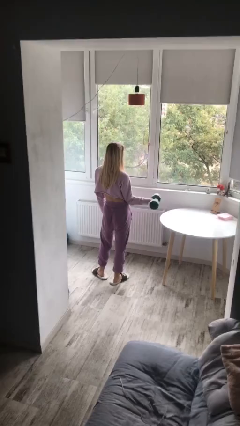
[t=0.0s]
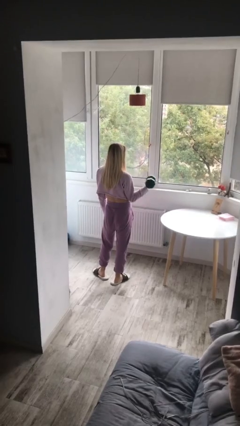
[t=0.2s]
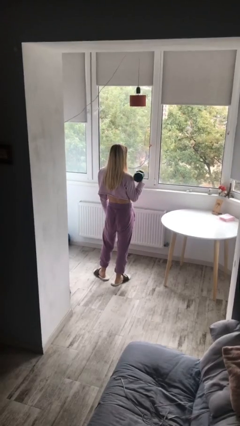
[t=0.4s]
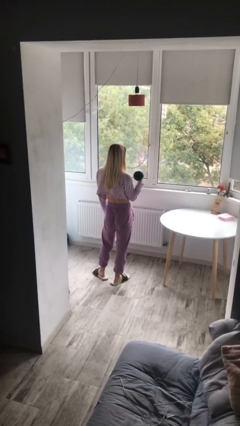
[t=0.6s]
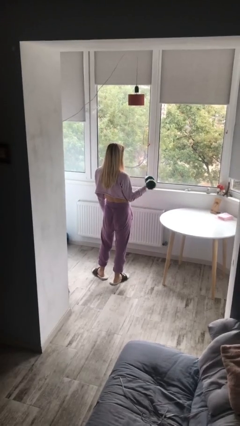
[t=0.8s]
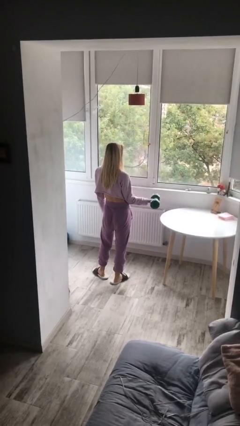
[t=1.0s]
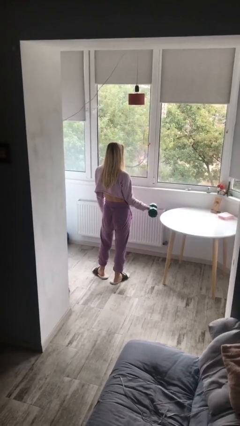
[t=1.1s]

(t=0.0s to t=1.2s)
person lifts dumbbells

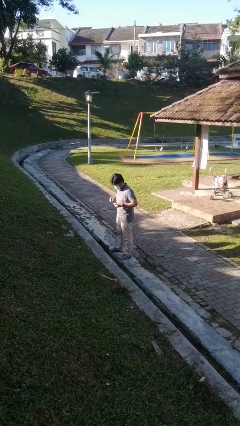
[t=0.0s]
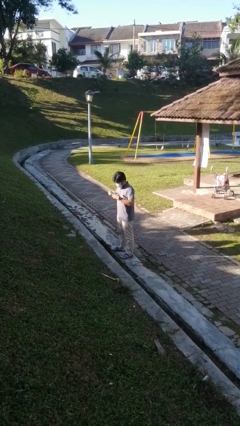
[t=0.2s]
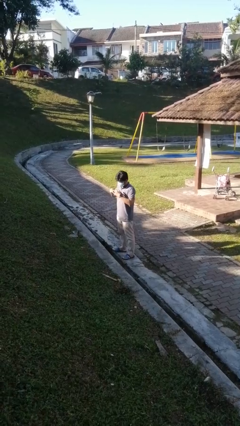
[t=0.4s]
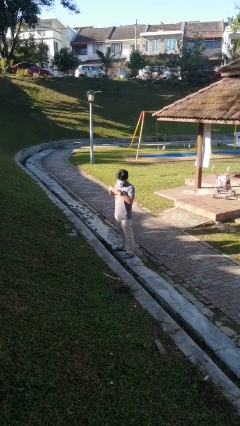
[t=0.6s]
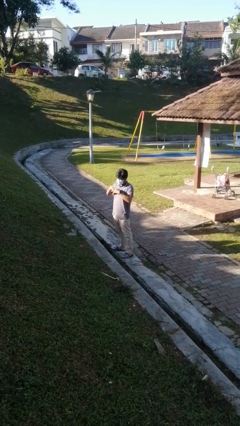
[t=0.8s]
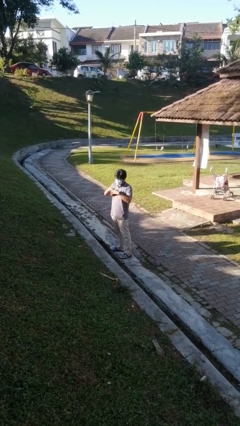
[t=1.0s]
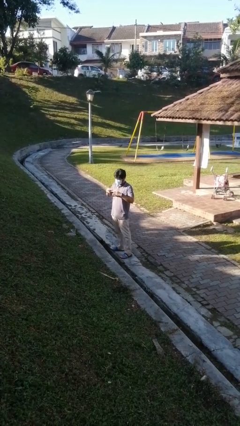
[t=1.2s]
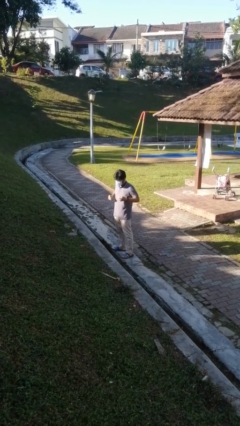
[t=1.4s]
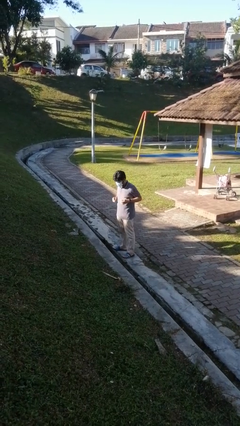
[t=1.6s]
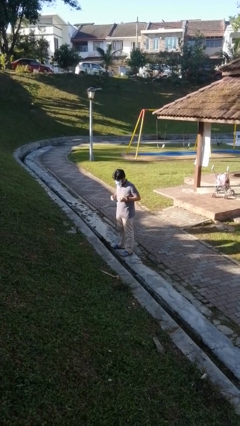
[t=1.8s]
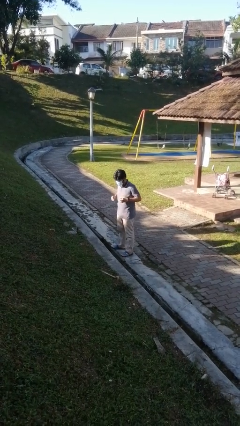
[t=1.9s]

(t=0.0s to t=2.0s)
person puts on ring

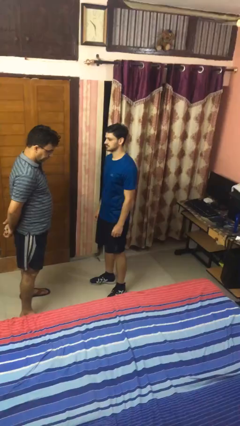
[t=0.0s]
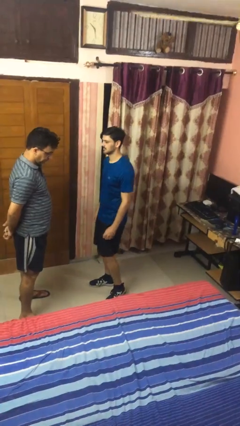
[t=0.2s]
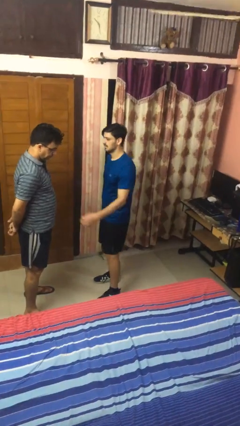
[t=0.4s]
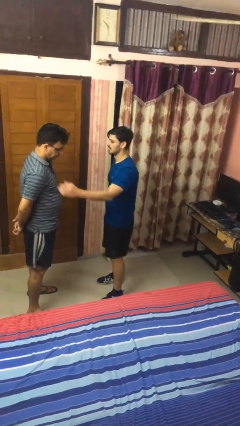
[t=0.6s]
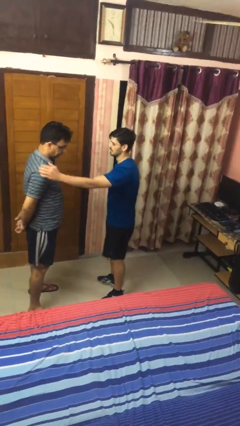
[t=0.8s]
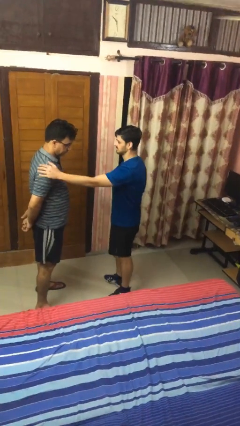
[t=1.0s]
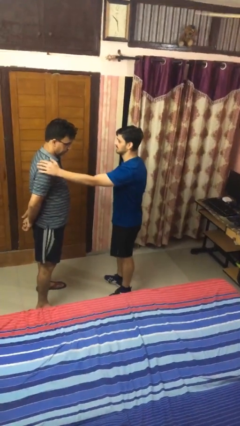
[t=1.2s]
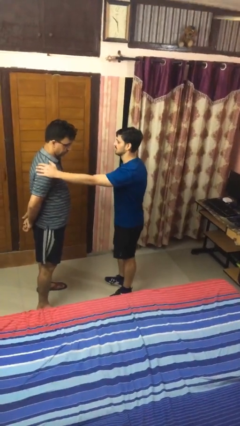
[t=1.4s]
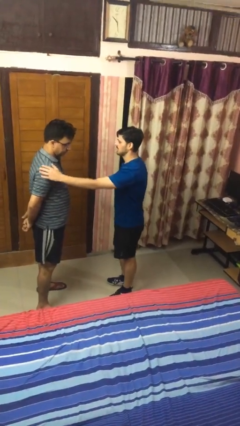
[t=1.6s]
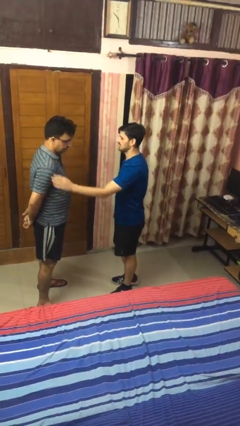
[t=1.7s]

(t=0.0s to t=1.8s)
person pounds shoulders of person

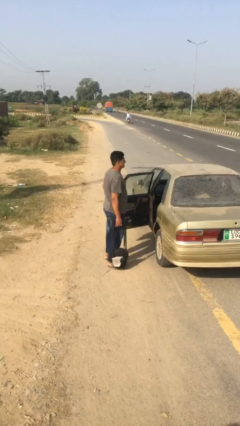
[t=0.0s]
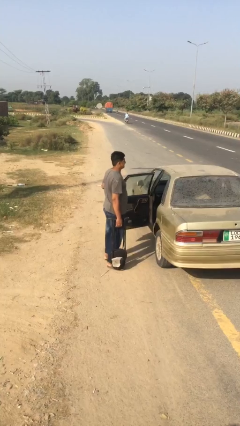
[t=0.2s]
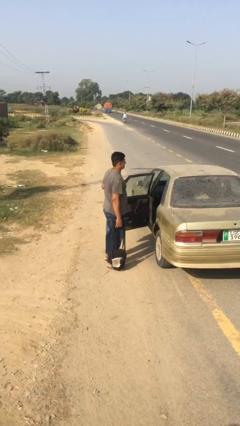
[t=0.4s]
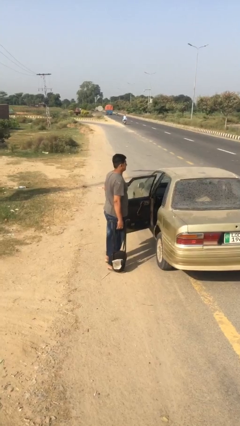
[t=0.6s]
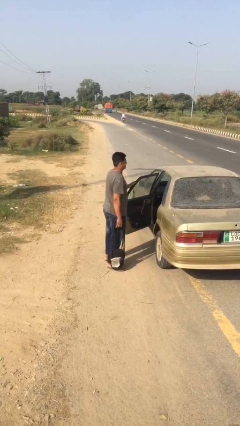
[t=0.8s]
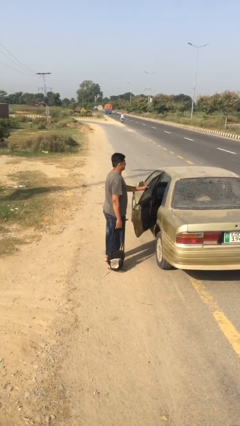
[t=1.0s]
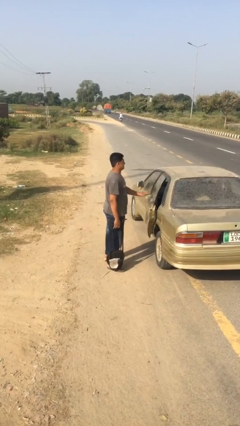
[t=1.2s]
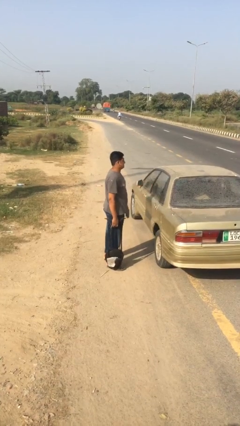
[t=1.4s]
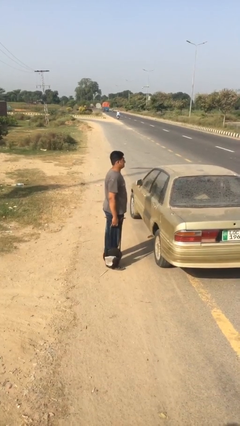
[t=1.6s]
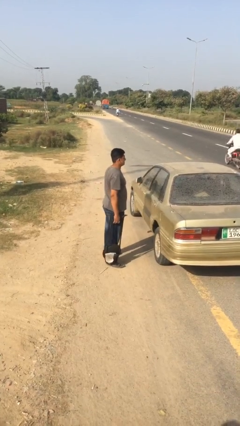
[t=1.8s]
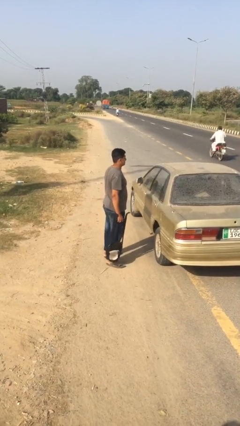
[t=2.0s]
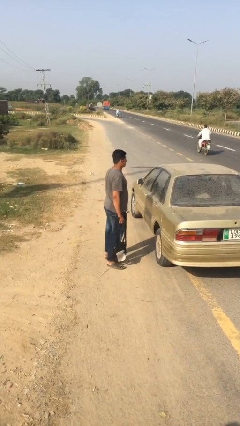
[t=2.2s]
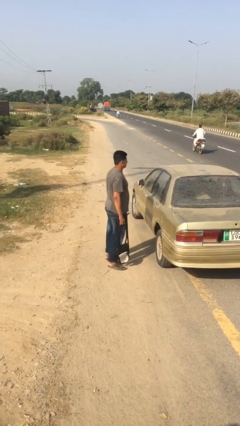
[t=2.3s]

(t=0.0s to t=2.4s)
person closes car door

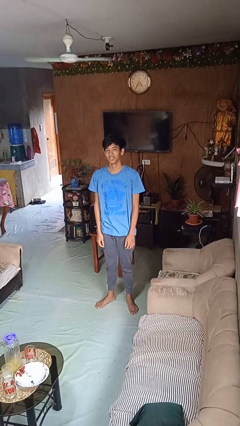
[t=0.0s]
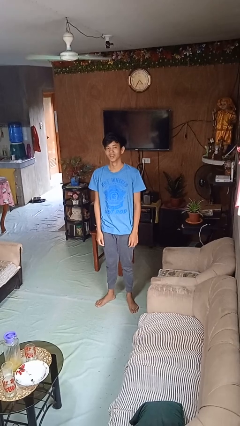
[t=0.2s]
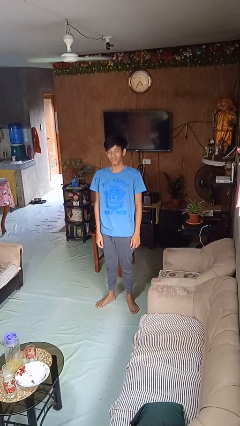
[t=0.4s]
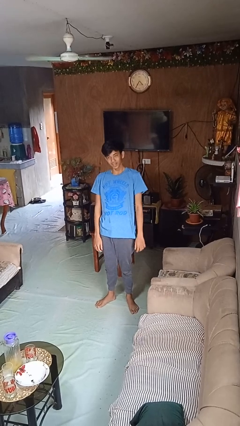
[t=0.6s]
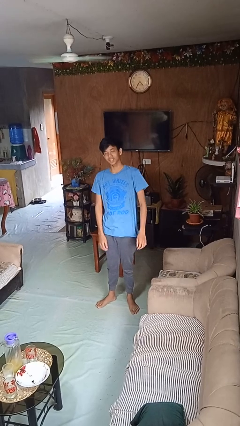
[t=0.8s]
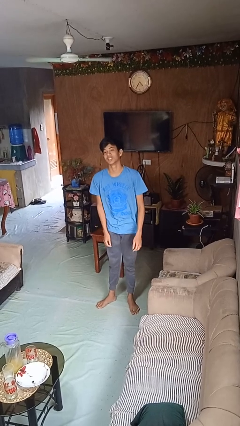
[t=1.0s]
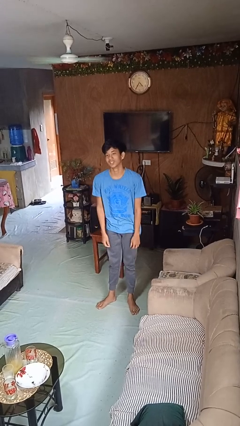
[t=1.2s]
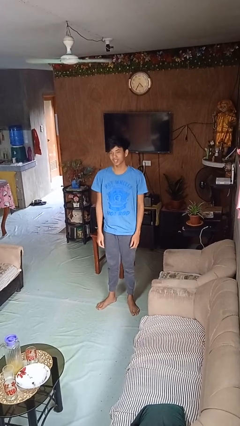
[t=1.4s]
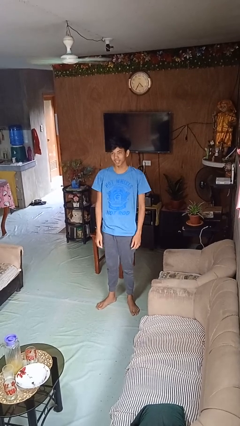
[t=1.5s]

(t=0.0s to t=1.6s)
person dances in place

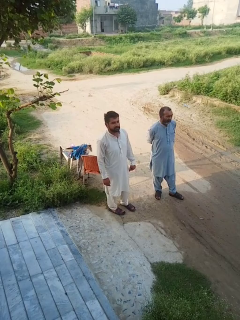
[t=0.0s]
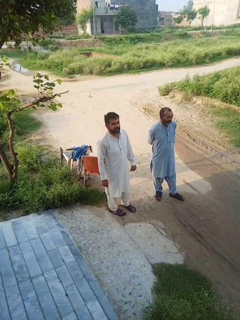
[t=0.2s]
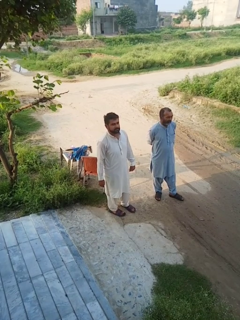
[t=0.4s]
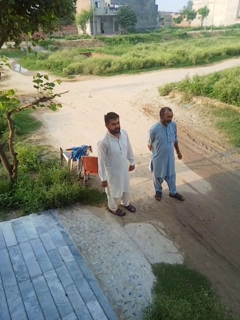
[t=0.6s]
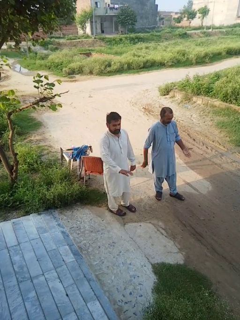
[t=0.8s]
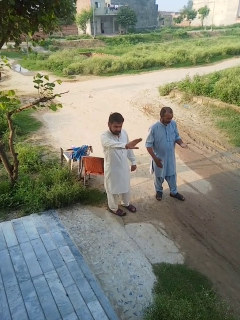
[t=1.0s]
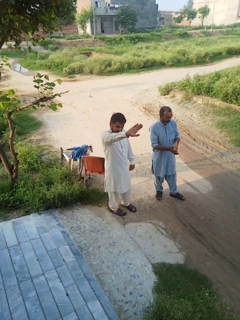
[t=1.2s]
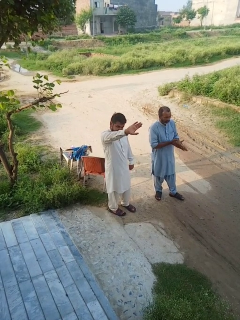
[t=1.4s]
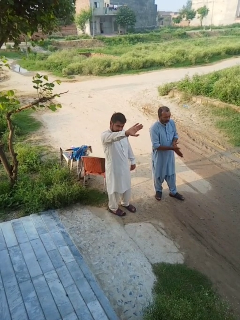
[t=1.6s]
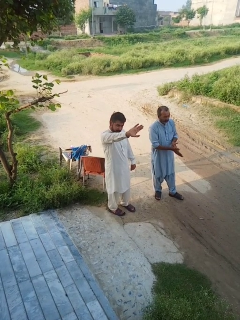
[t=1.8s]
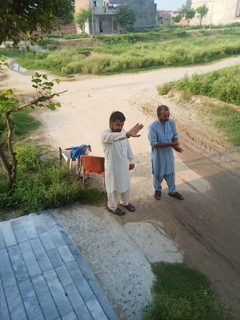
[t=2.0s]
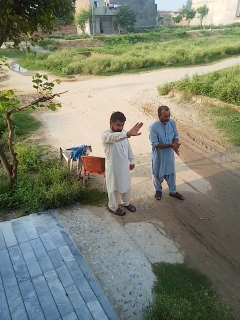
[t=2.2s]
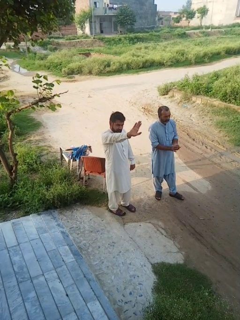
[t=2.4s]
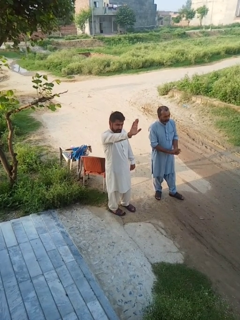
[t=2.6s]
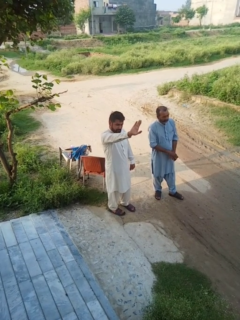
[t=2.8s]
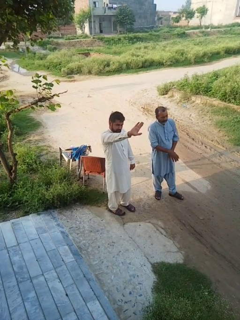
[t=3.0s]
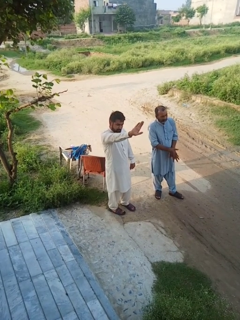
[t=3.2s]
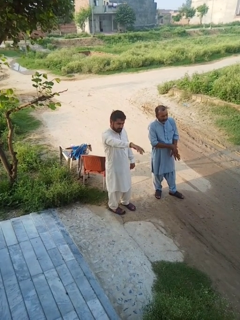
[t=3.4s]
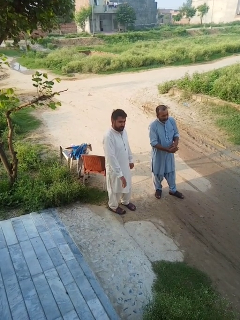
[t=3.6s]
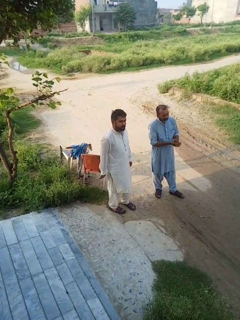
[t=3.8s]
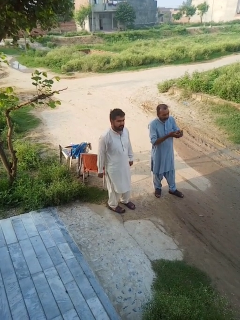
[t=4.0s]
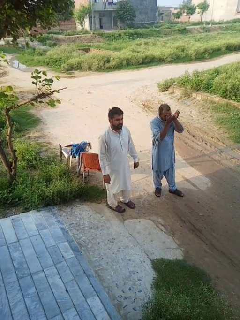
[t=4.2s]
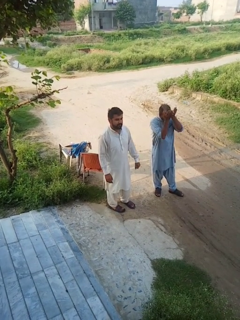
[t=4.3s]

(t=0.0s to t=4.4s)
person waves at person

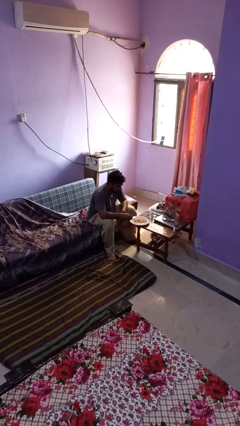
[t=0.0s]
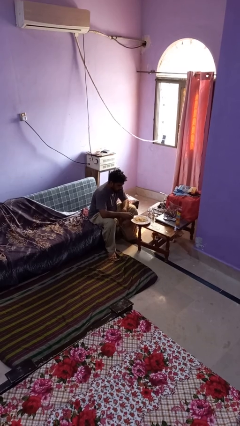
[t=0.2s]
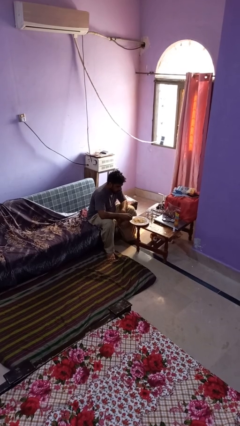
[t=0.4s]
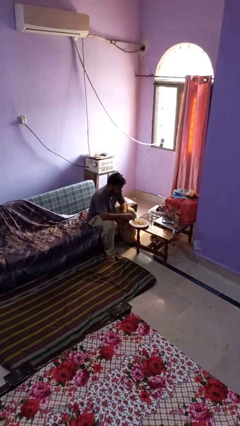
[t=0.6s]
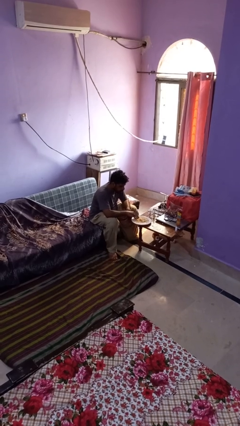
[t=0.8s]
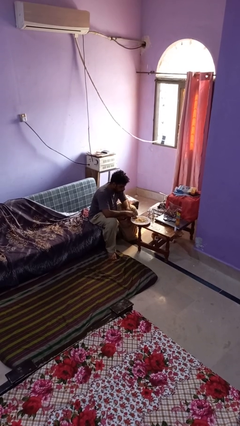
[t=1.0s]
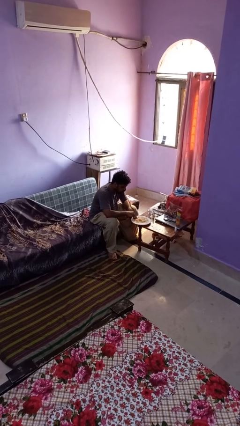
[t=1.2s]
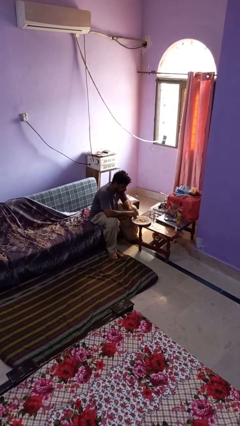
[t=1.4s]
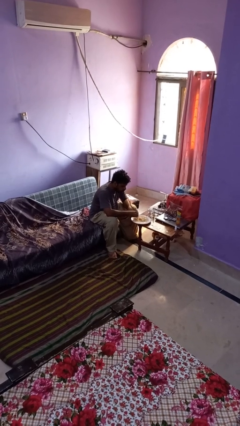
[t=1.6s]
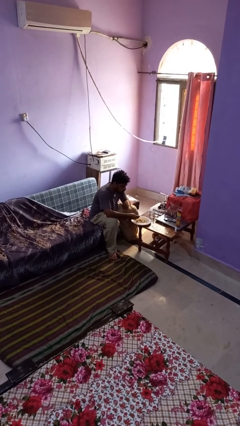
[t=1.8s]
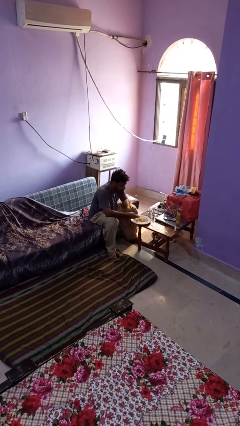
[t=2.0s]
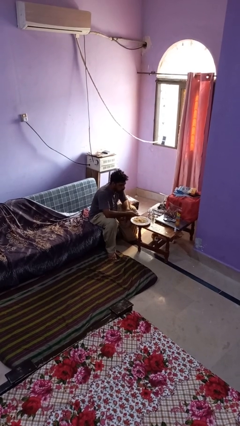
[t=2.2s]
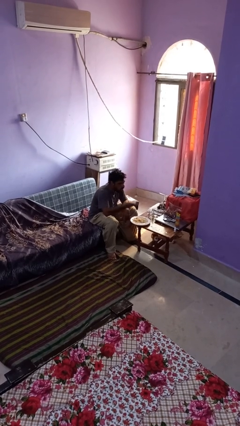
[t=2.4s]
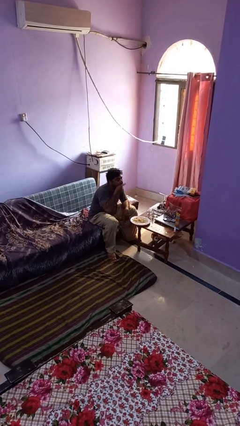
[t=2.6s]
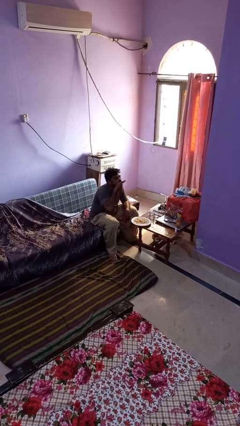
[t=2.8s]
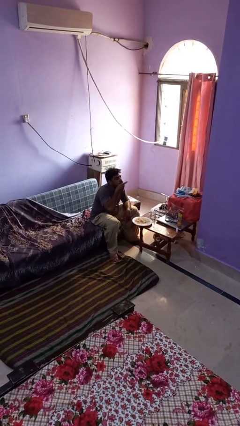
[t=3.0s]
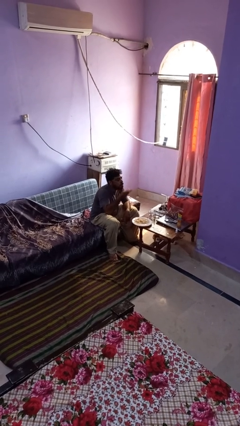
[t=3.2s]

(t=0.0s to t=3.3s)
person eats with hands

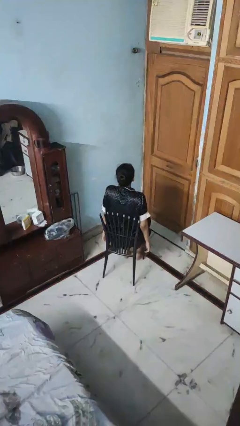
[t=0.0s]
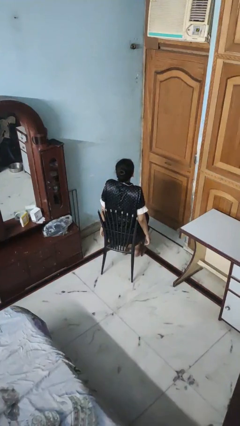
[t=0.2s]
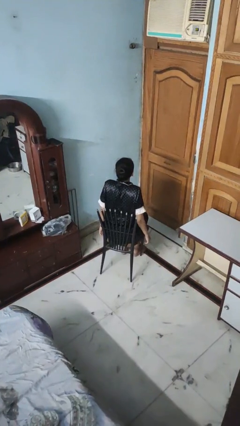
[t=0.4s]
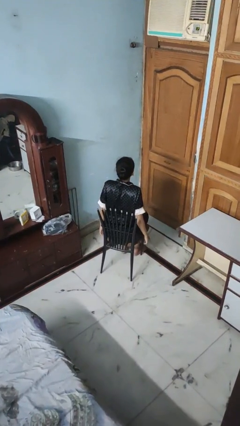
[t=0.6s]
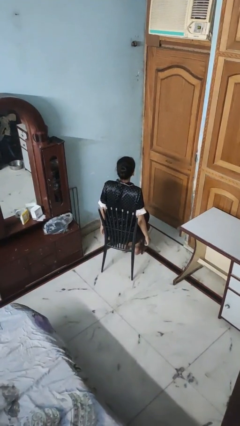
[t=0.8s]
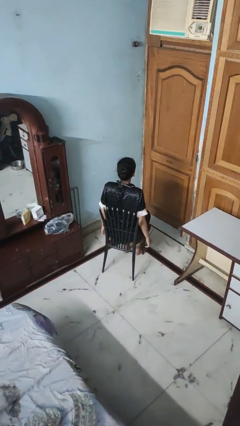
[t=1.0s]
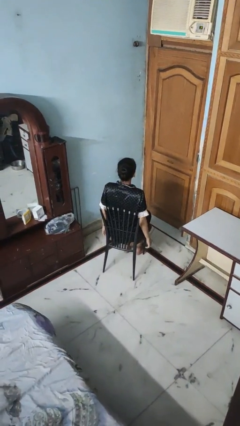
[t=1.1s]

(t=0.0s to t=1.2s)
person shrugs

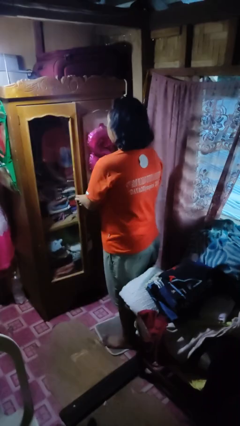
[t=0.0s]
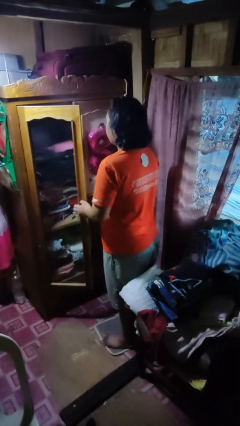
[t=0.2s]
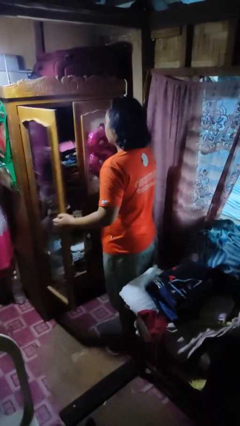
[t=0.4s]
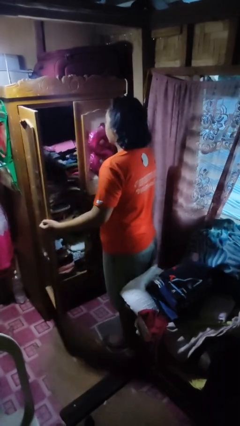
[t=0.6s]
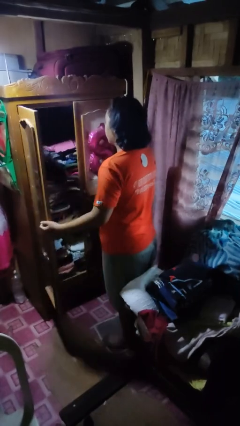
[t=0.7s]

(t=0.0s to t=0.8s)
person opens closet door
